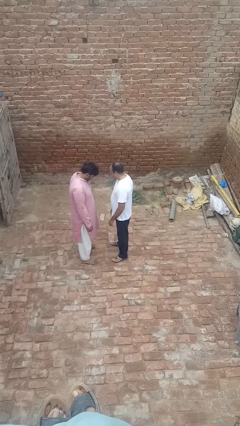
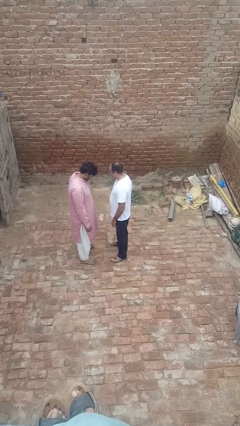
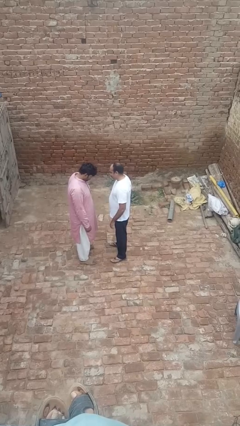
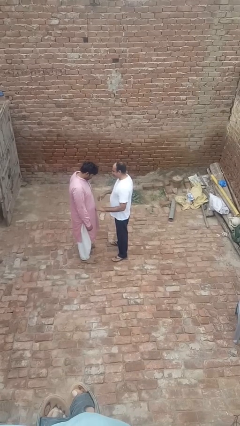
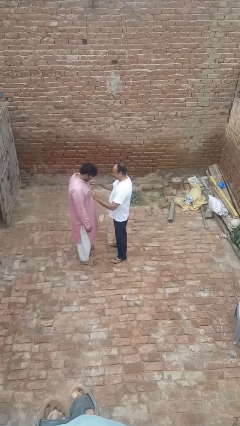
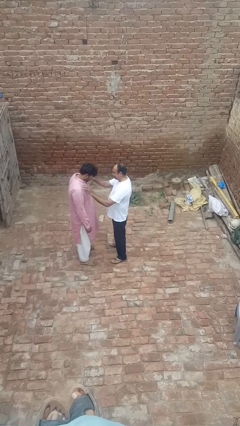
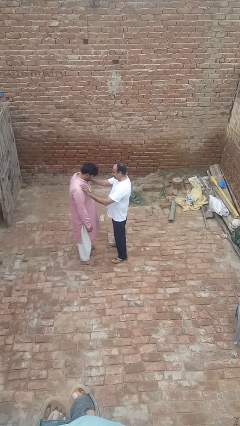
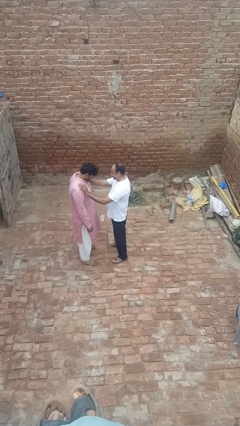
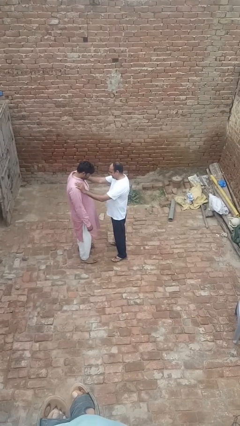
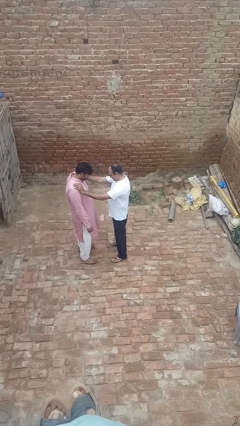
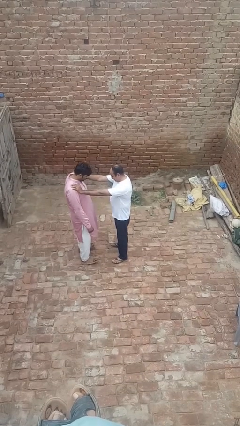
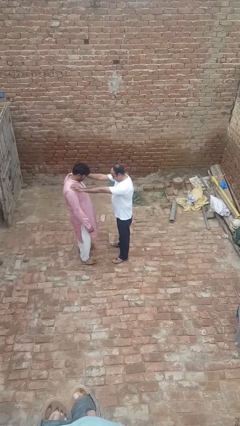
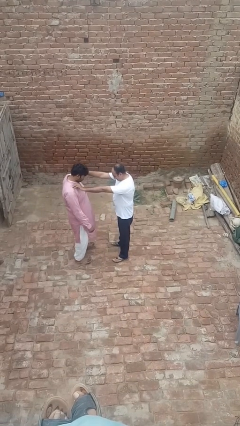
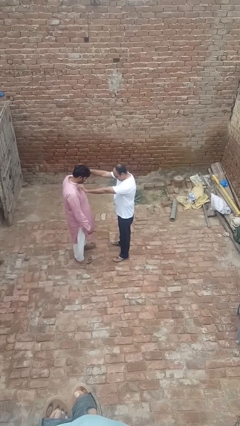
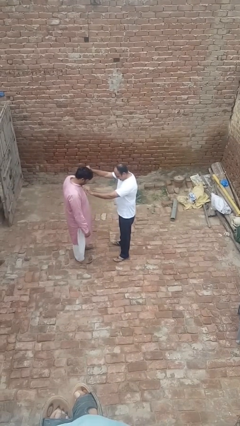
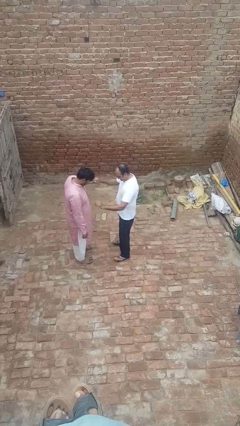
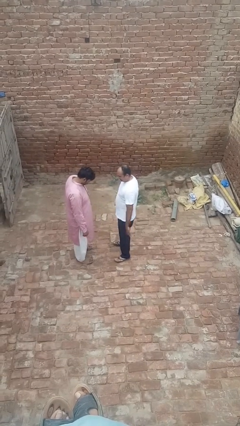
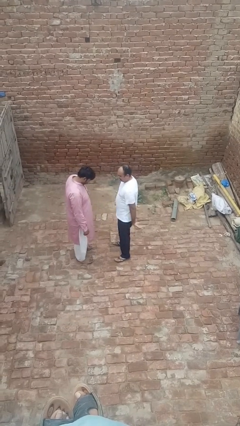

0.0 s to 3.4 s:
person shoves person

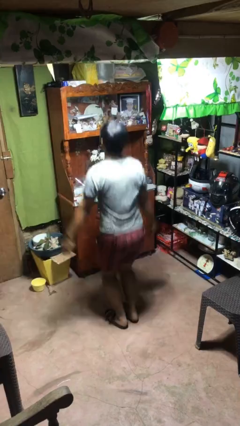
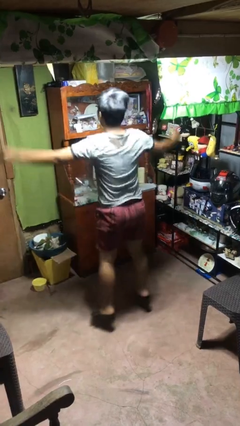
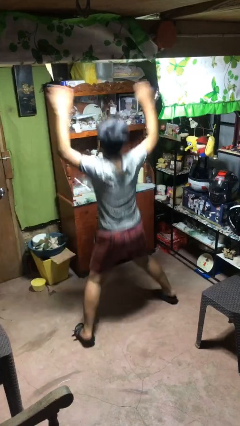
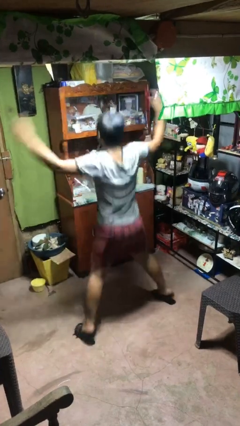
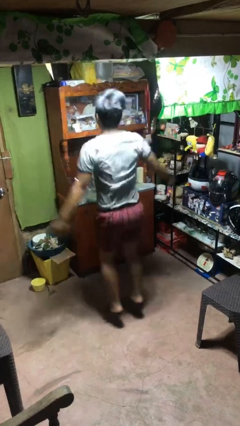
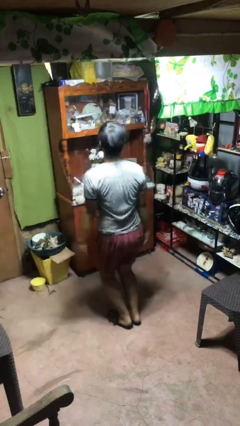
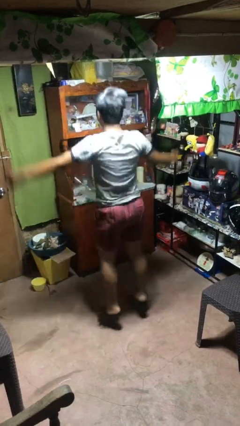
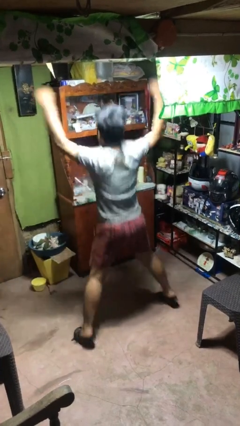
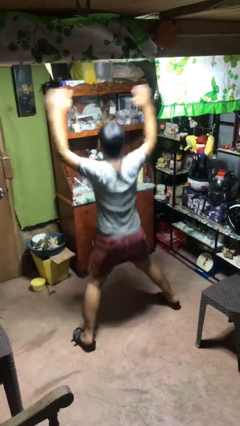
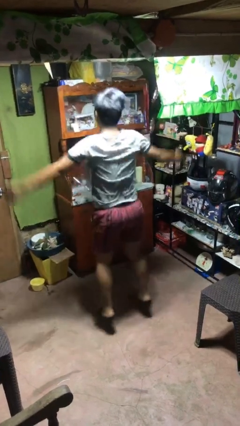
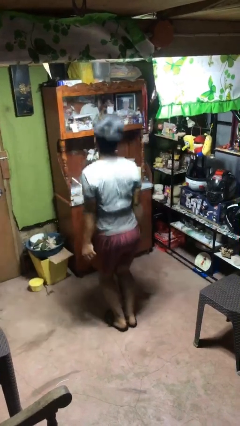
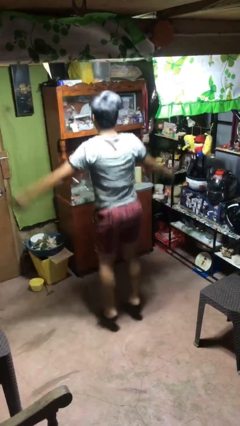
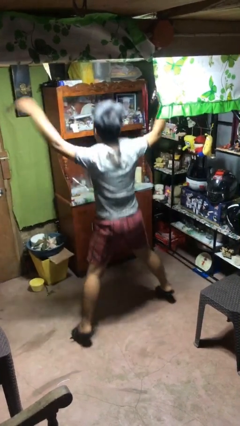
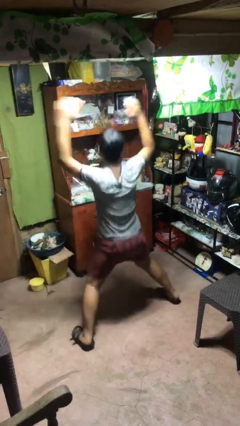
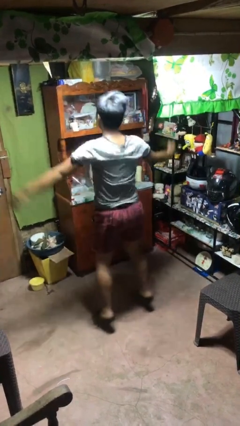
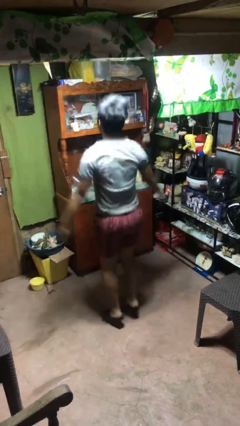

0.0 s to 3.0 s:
person exercises with jumping jacks

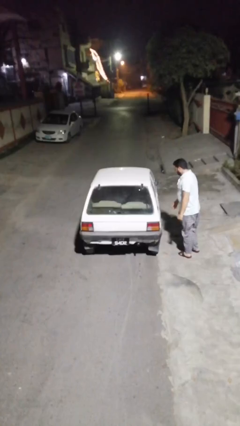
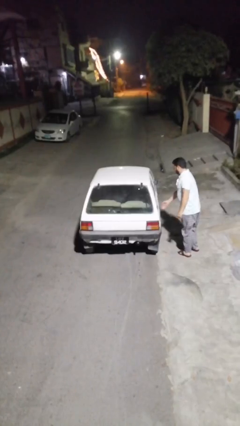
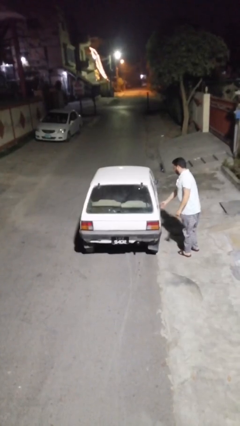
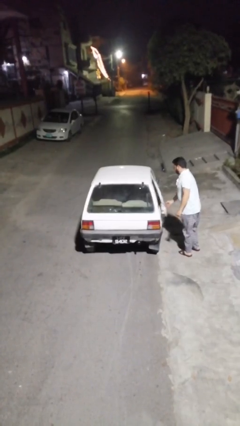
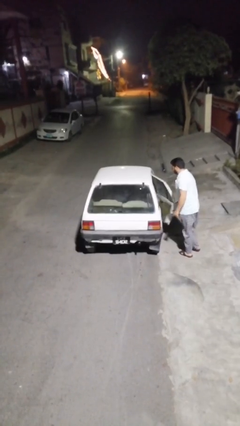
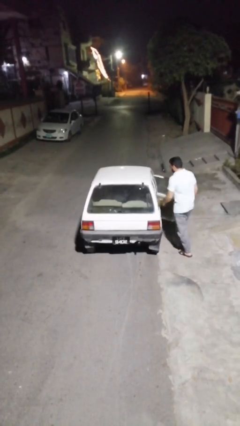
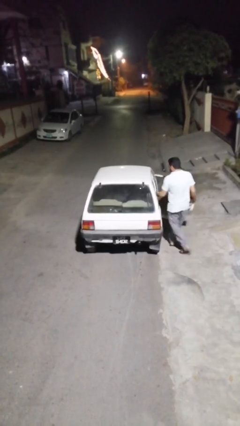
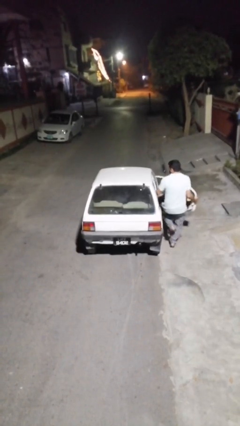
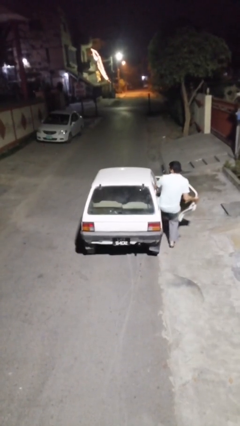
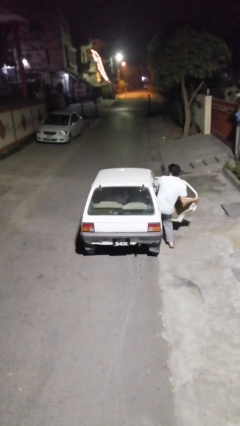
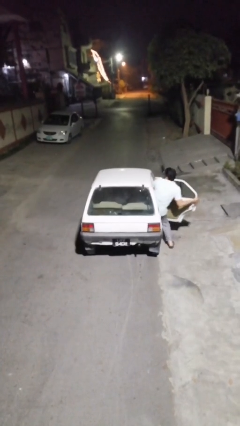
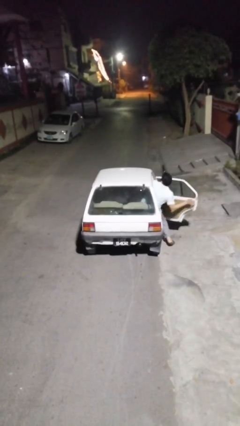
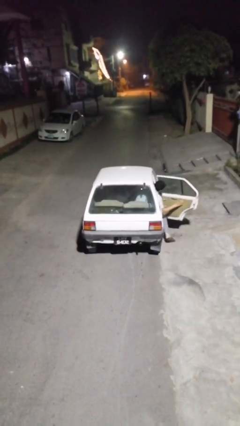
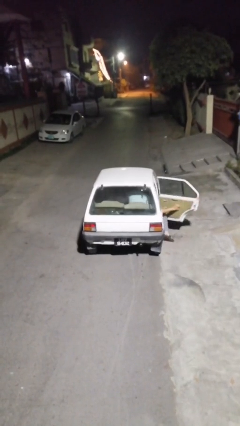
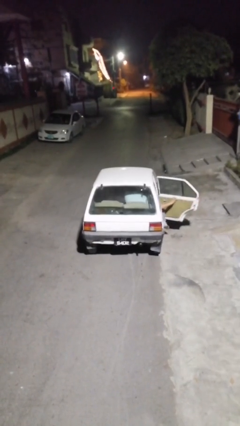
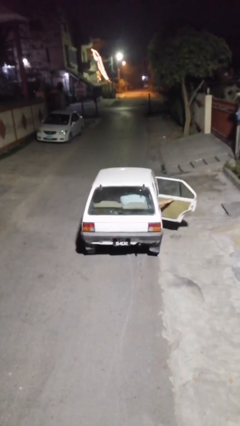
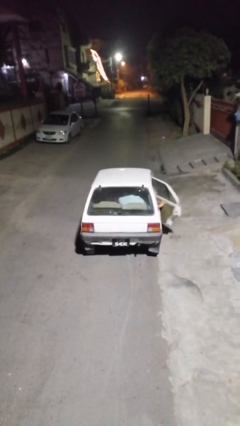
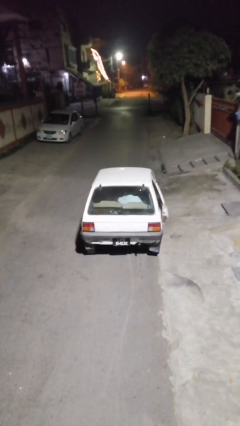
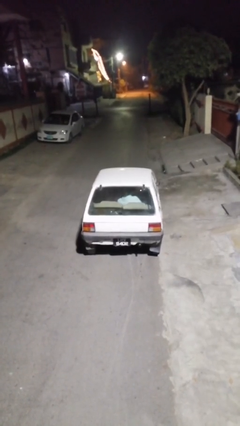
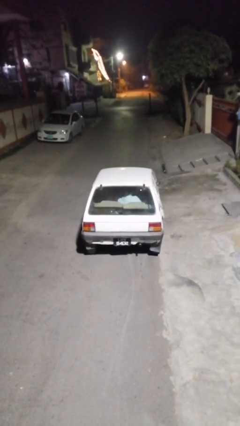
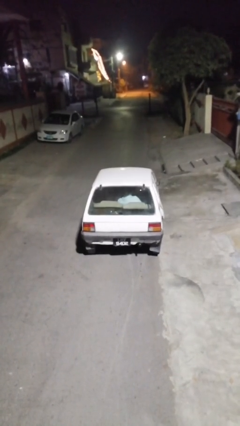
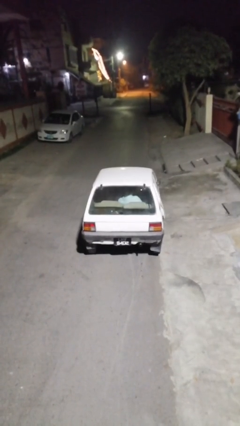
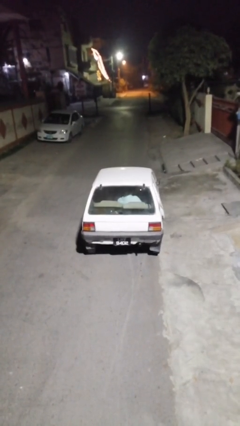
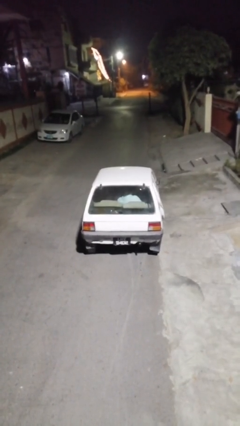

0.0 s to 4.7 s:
car picks up person

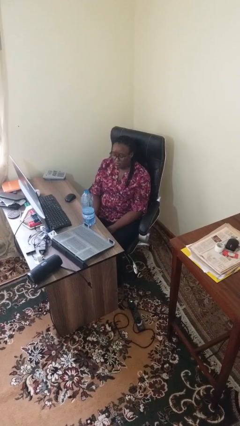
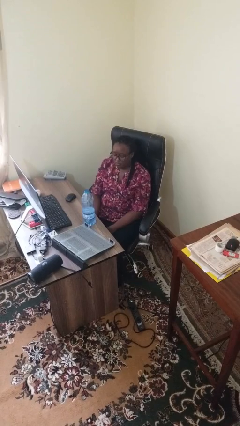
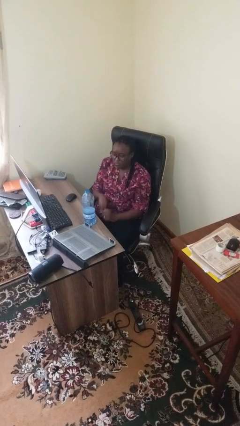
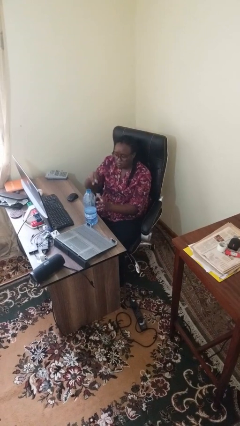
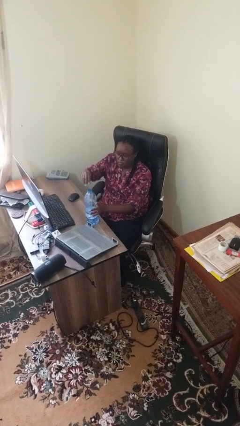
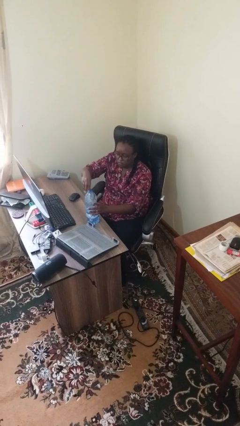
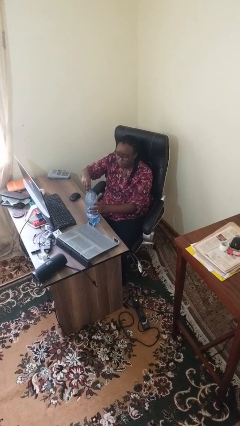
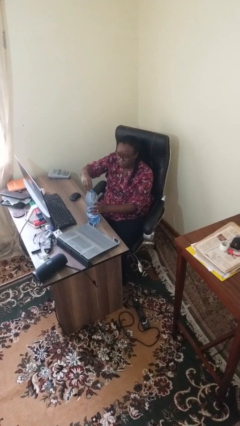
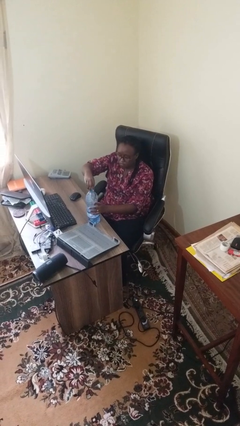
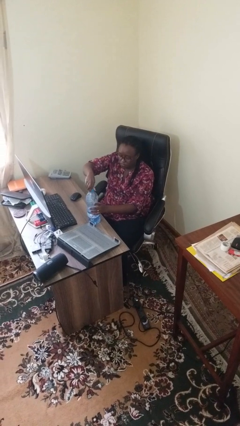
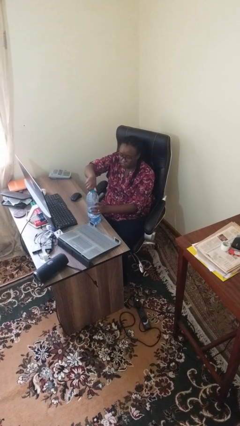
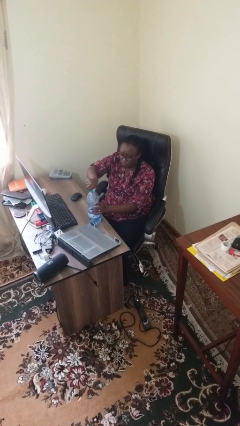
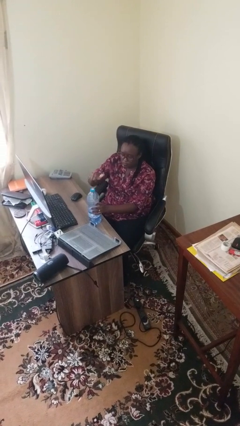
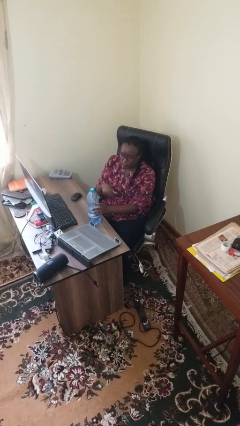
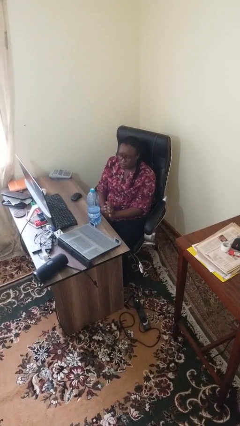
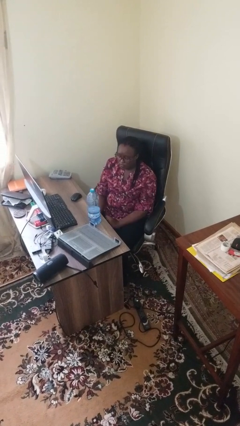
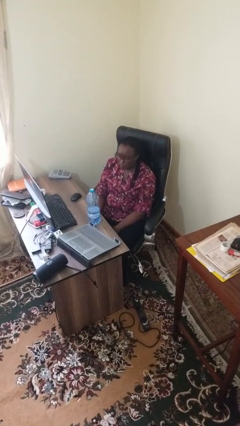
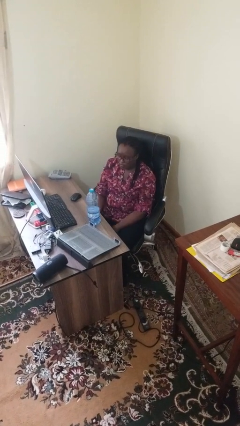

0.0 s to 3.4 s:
person screws lid to bottle

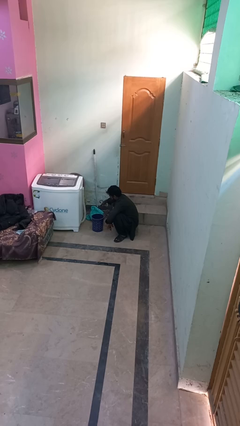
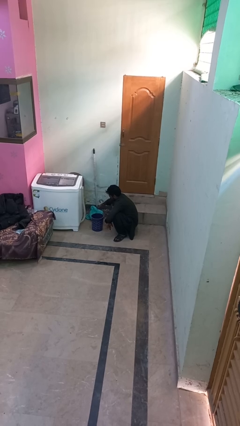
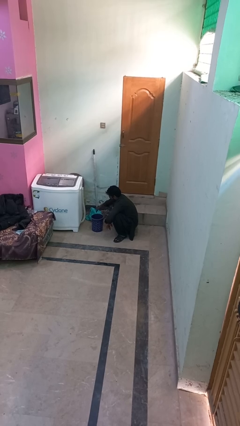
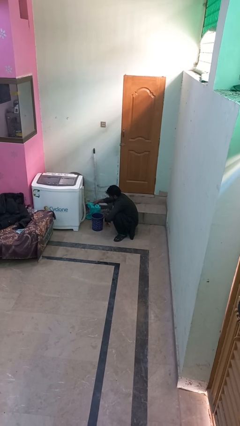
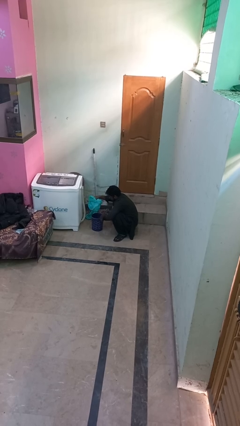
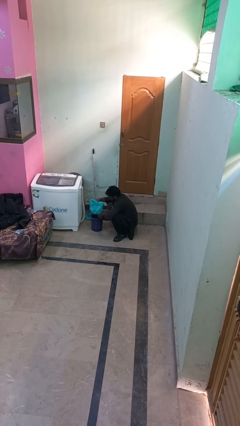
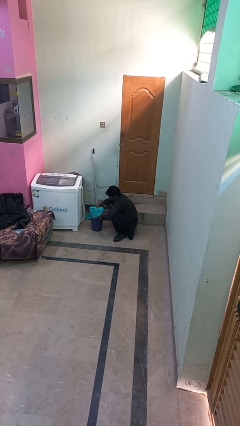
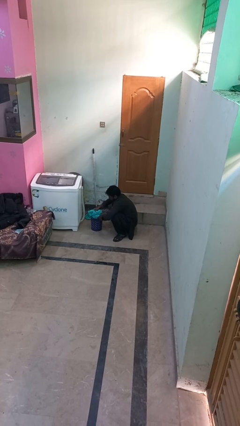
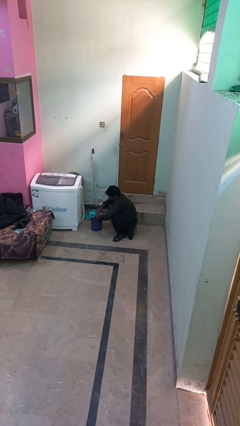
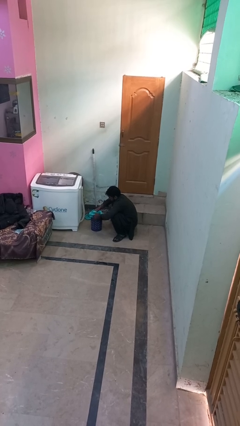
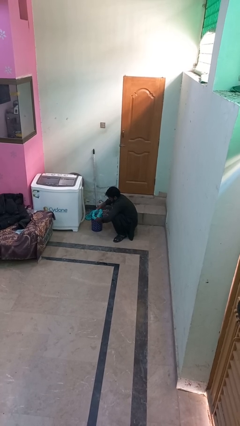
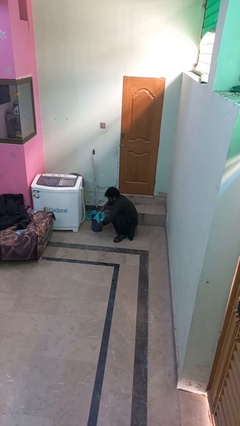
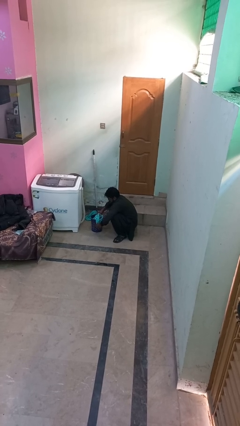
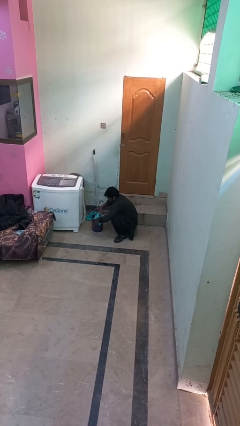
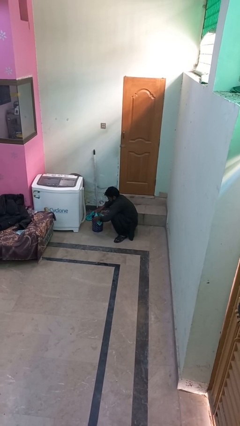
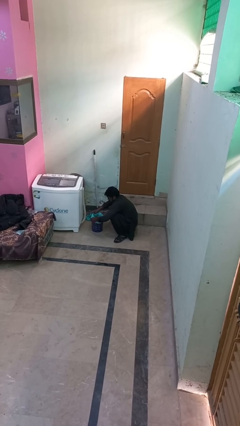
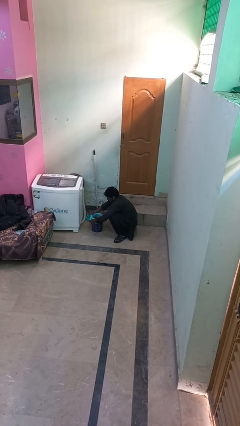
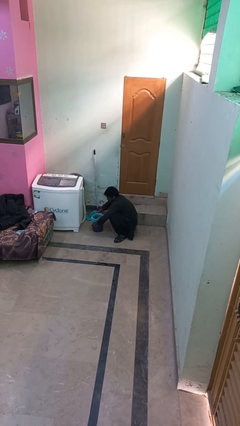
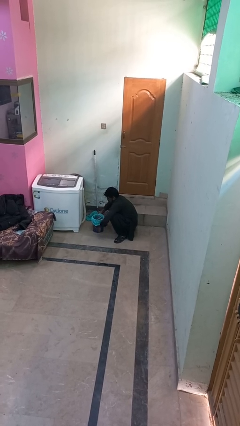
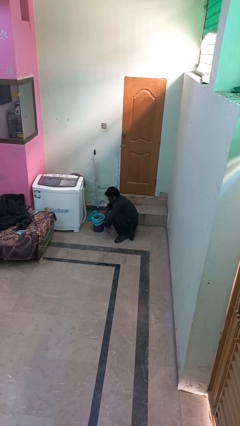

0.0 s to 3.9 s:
person inserts trashbag into trashcan
